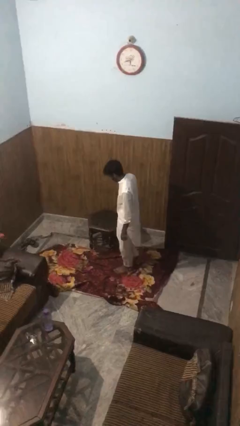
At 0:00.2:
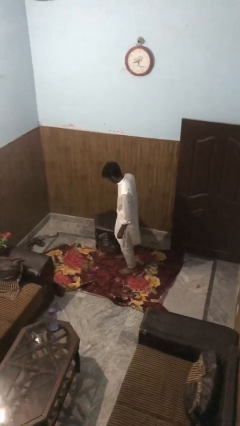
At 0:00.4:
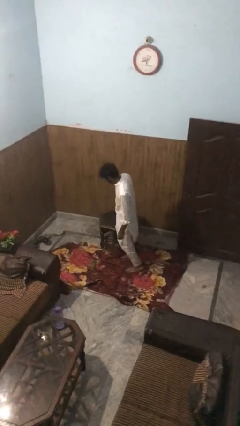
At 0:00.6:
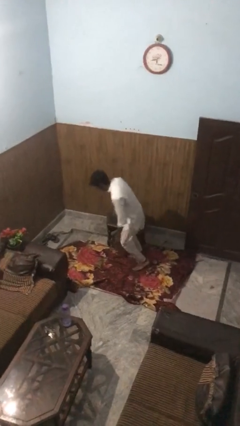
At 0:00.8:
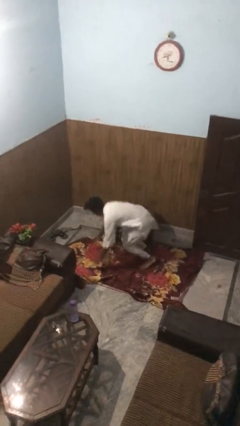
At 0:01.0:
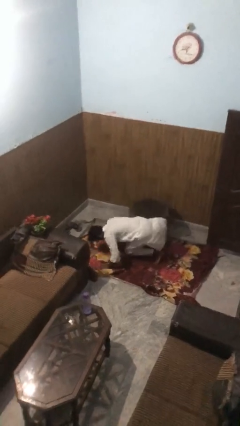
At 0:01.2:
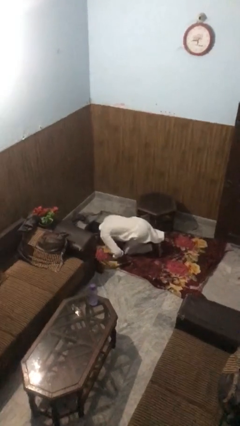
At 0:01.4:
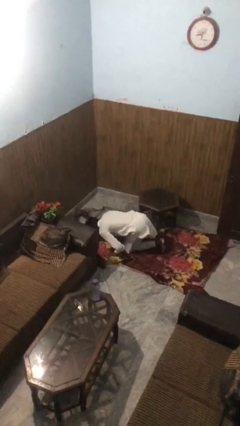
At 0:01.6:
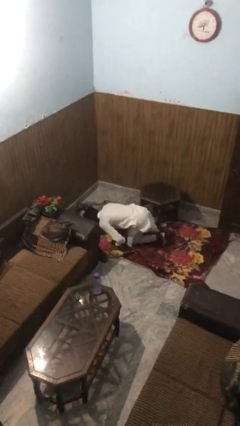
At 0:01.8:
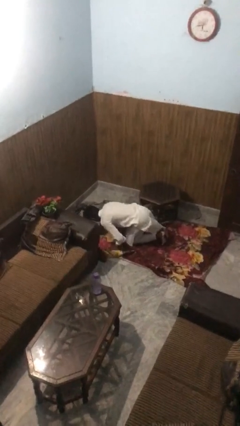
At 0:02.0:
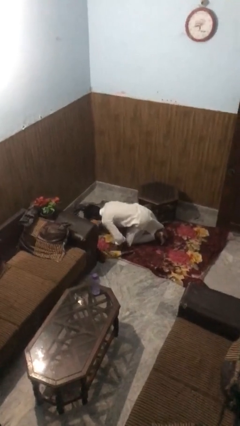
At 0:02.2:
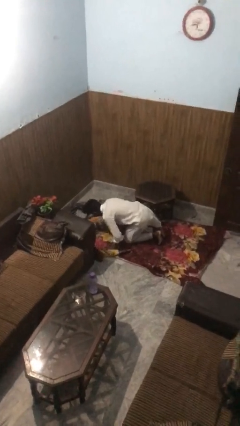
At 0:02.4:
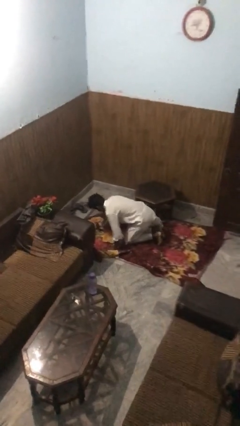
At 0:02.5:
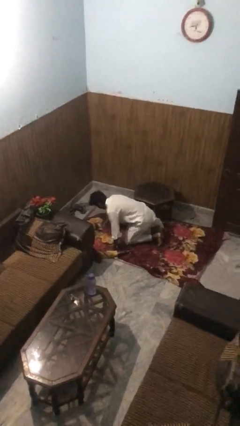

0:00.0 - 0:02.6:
person bumps into table

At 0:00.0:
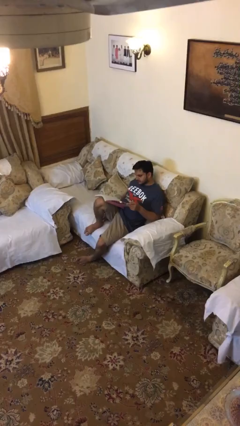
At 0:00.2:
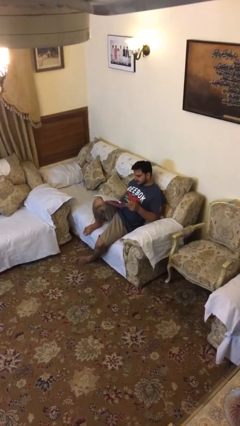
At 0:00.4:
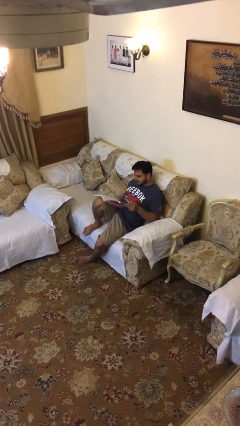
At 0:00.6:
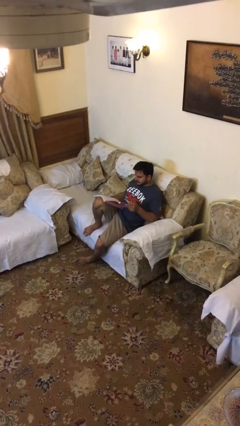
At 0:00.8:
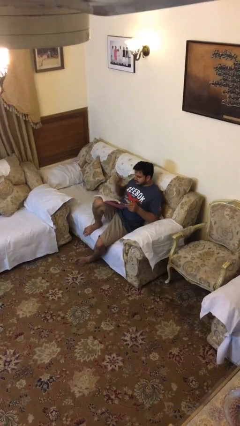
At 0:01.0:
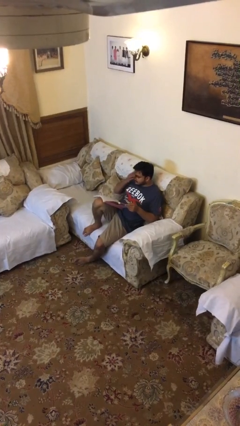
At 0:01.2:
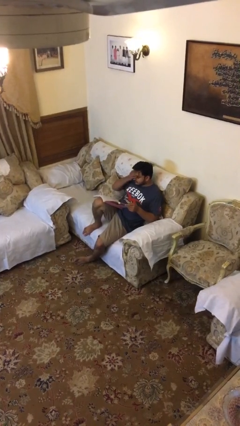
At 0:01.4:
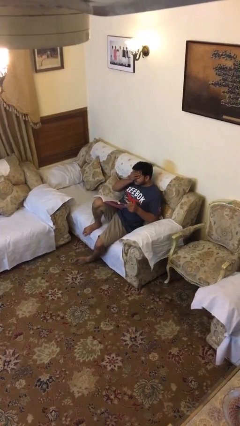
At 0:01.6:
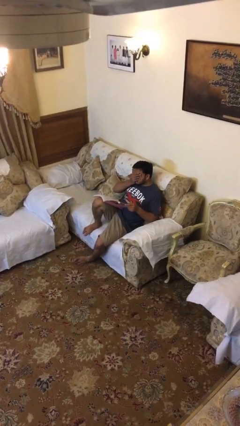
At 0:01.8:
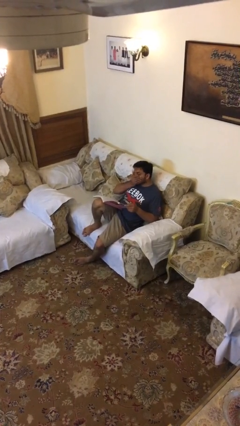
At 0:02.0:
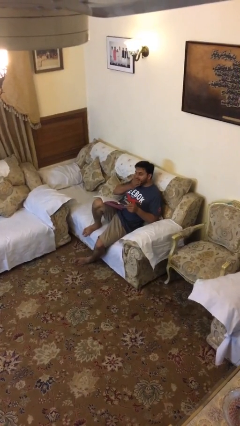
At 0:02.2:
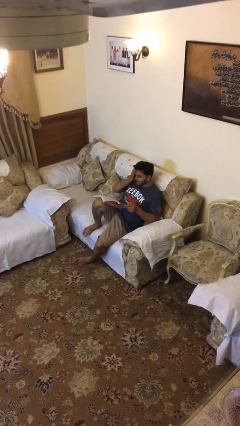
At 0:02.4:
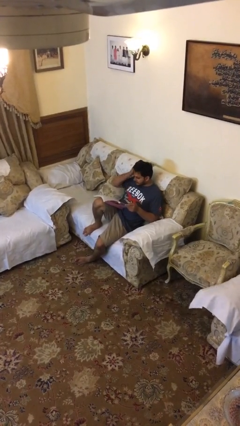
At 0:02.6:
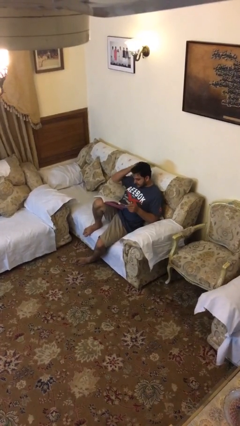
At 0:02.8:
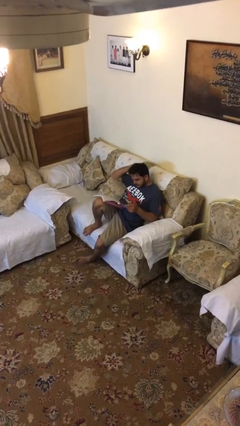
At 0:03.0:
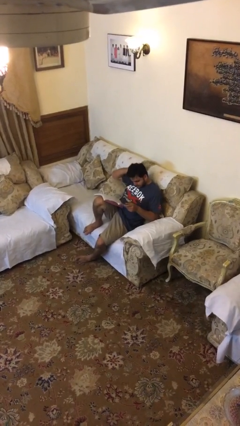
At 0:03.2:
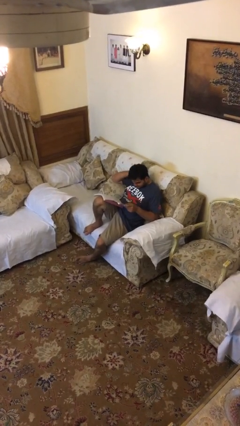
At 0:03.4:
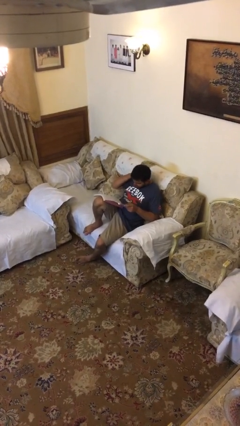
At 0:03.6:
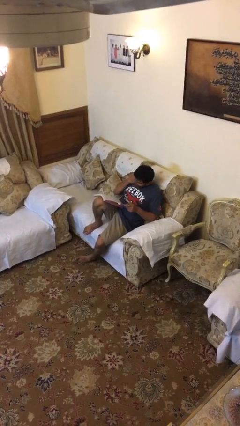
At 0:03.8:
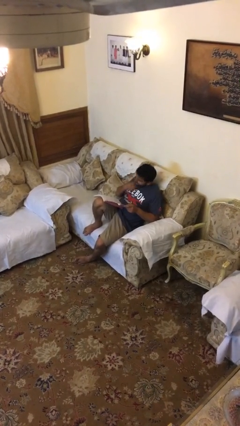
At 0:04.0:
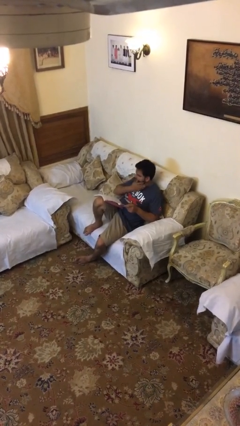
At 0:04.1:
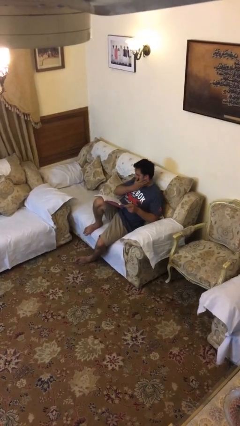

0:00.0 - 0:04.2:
person reads document

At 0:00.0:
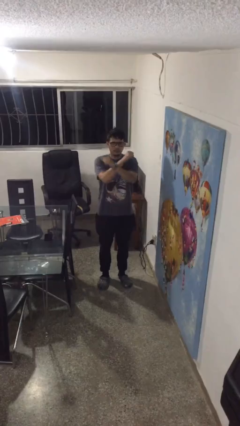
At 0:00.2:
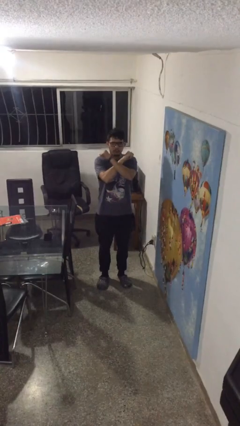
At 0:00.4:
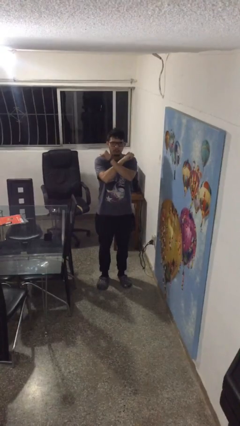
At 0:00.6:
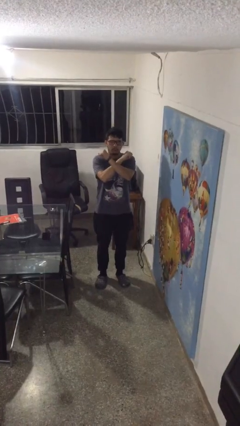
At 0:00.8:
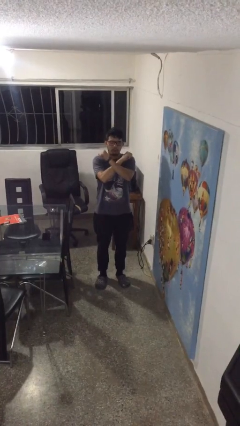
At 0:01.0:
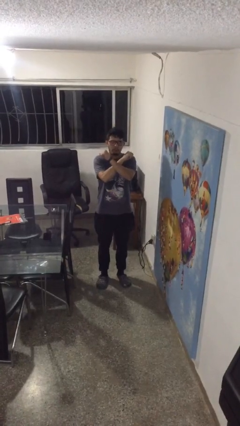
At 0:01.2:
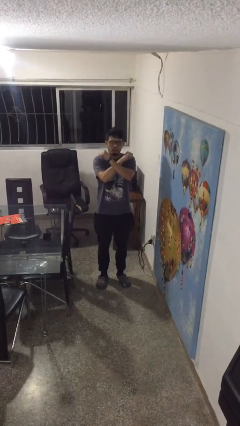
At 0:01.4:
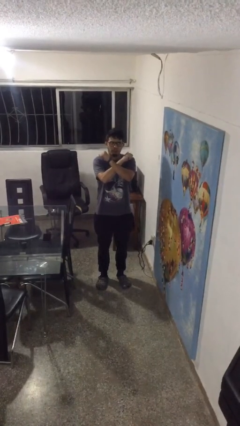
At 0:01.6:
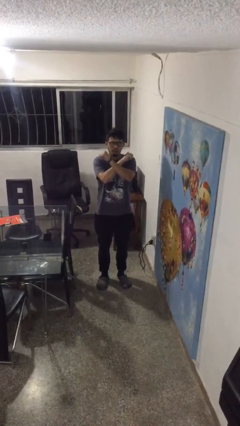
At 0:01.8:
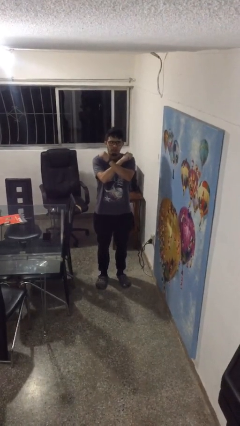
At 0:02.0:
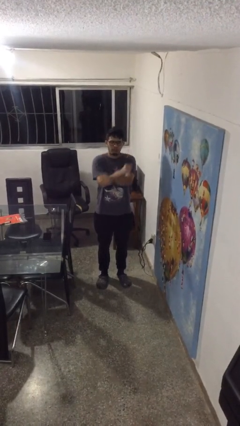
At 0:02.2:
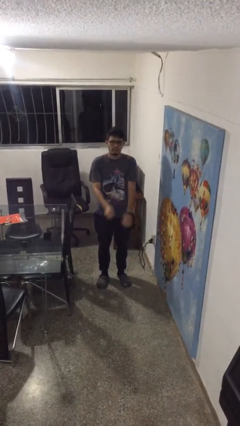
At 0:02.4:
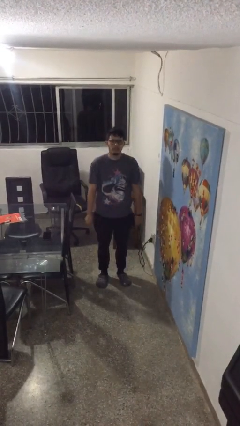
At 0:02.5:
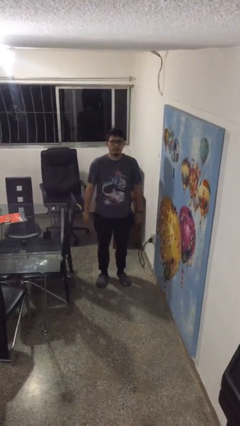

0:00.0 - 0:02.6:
person gestures arms x

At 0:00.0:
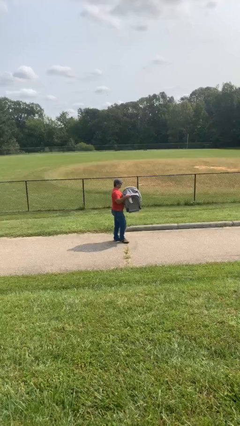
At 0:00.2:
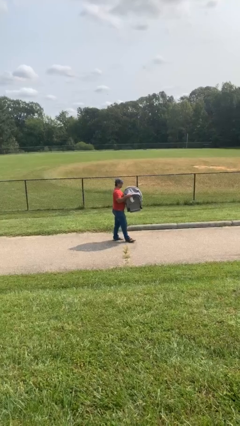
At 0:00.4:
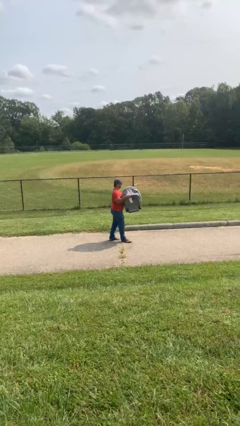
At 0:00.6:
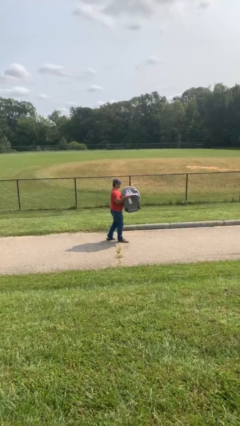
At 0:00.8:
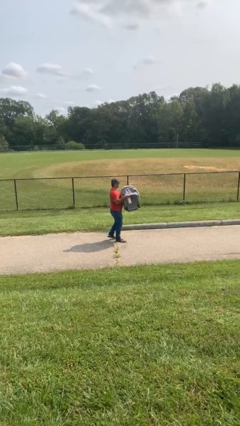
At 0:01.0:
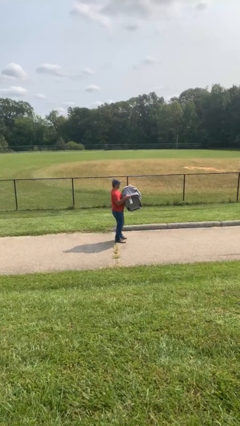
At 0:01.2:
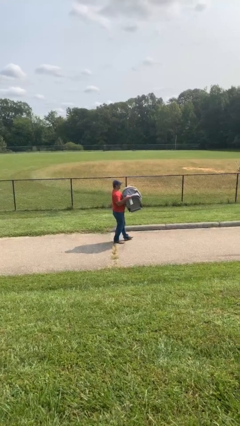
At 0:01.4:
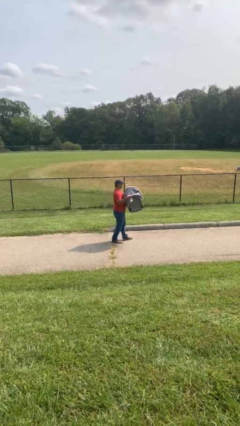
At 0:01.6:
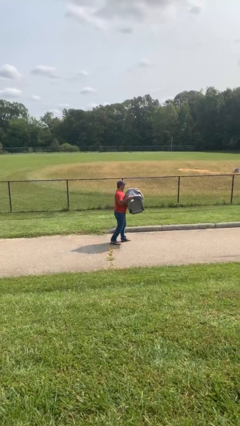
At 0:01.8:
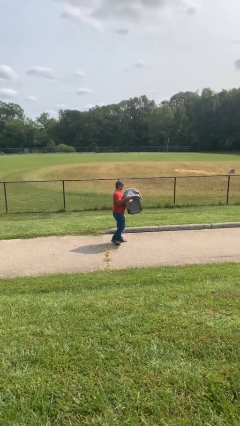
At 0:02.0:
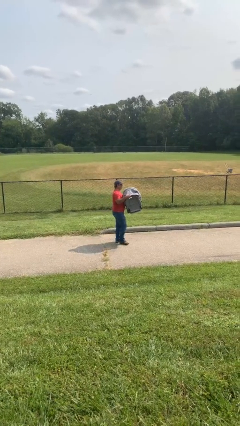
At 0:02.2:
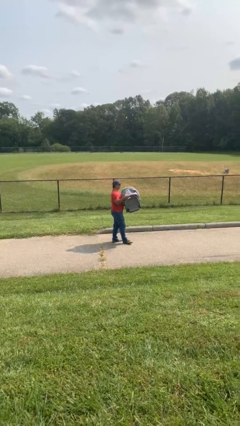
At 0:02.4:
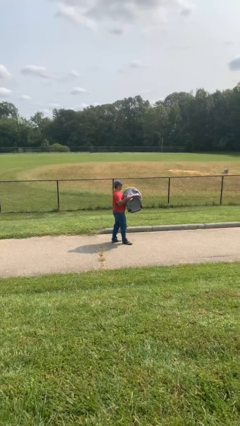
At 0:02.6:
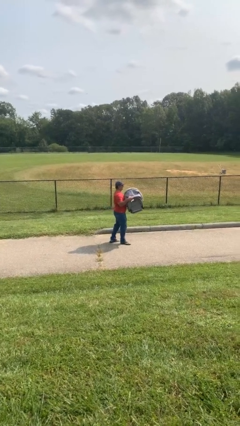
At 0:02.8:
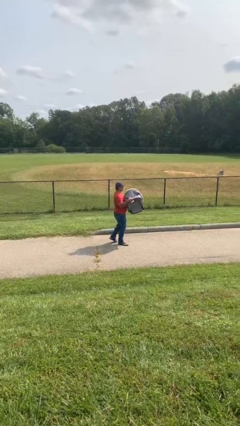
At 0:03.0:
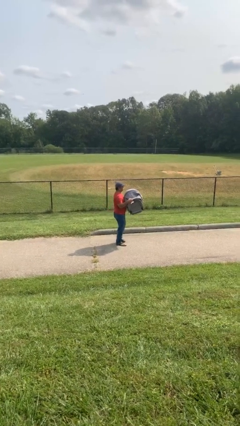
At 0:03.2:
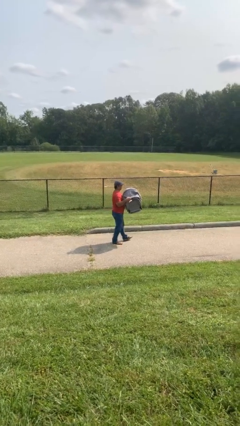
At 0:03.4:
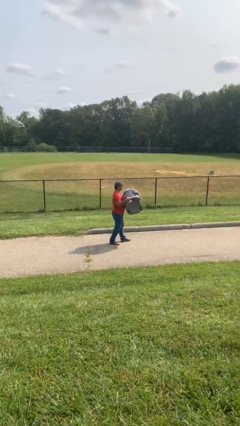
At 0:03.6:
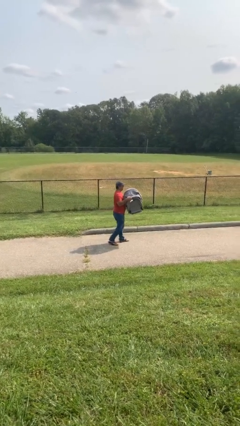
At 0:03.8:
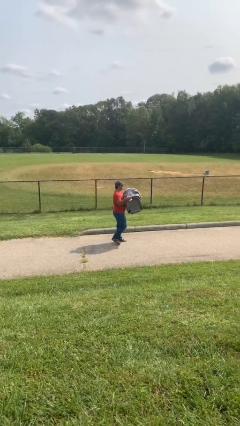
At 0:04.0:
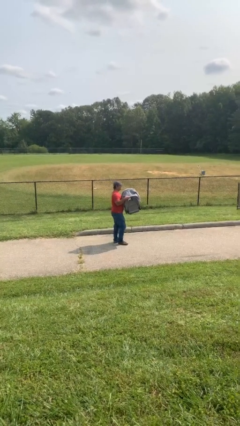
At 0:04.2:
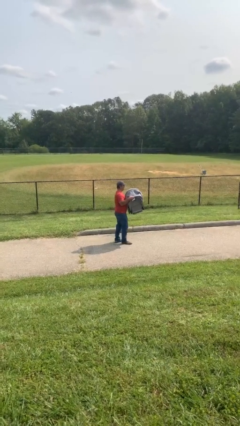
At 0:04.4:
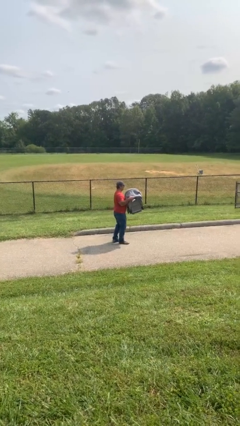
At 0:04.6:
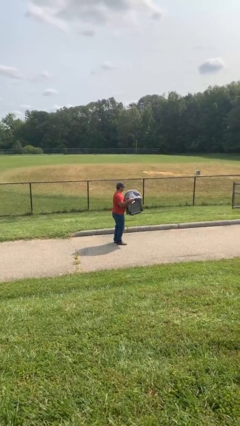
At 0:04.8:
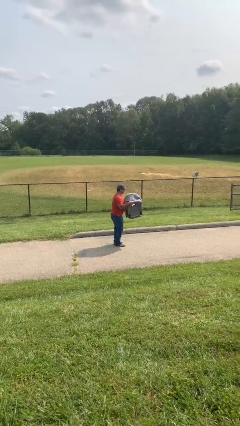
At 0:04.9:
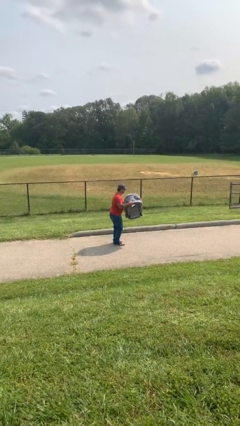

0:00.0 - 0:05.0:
person carries heavy object

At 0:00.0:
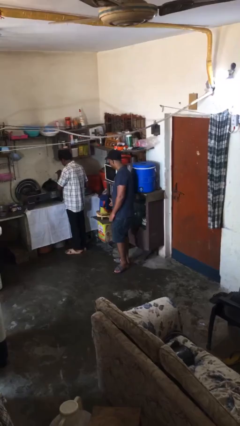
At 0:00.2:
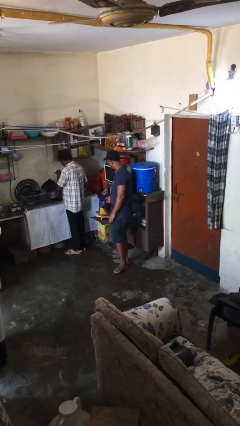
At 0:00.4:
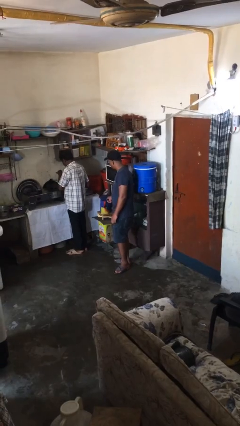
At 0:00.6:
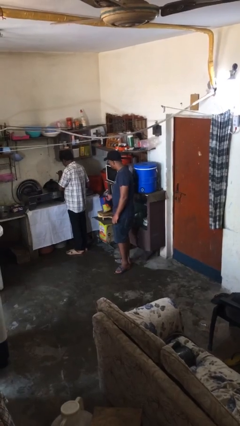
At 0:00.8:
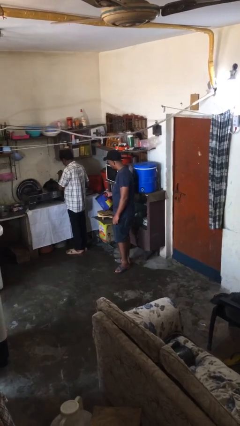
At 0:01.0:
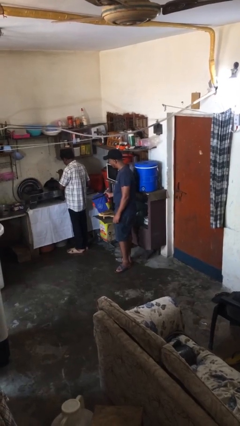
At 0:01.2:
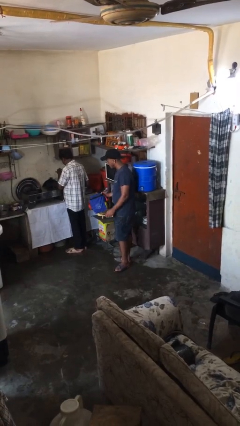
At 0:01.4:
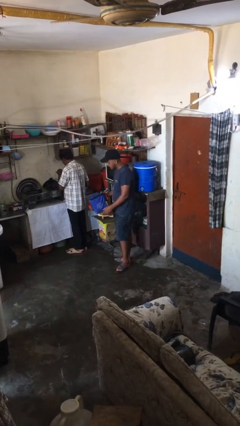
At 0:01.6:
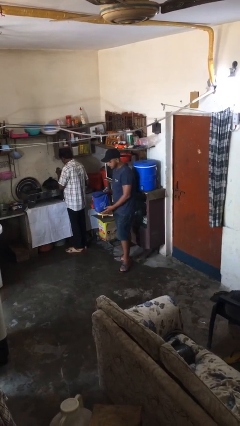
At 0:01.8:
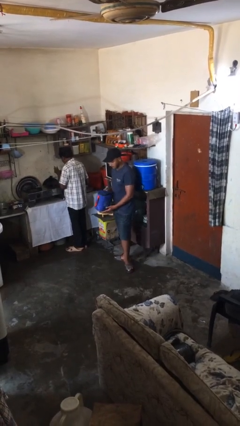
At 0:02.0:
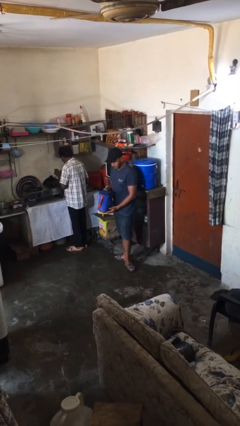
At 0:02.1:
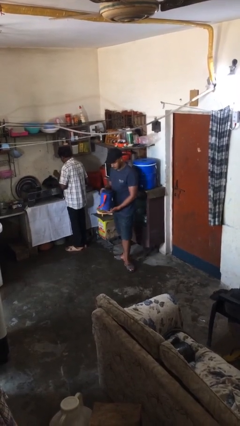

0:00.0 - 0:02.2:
person steals object from person

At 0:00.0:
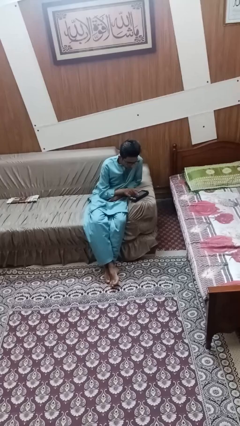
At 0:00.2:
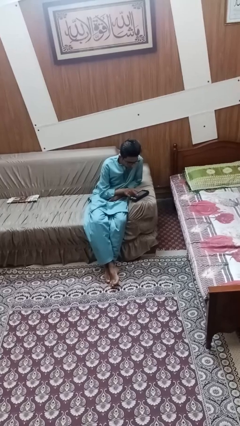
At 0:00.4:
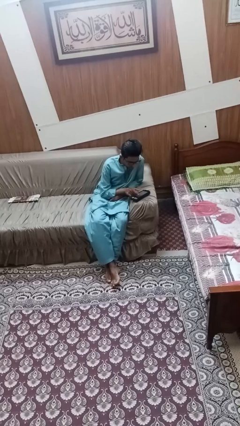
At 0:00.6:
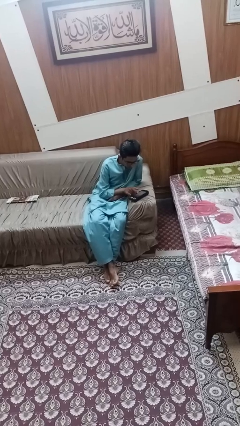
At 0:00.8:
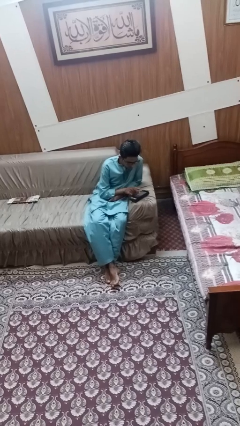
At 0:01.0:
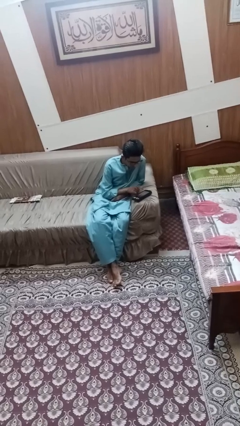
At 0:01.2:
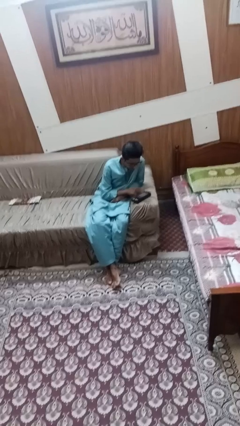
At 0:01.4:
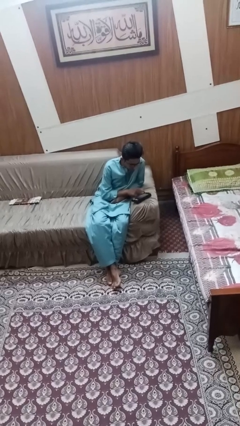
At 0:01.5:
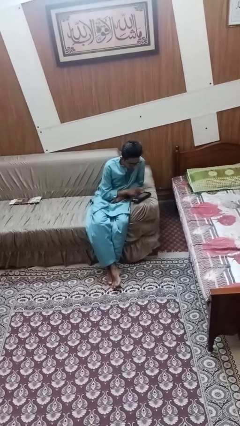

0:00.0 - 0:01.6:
person interacts with tablet
